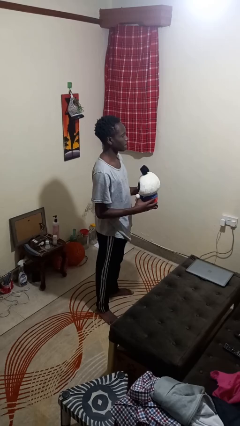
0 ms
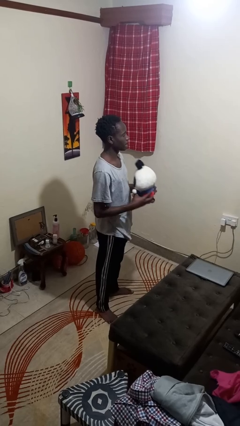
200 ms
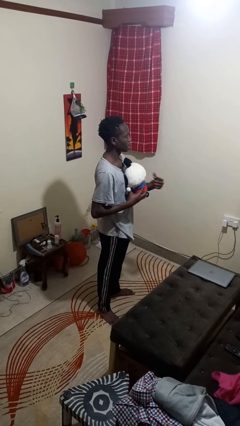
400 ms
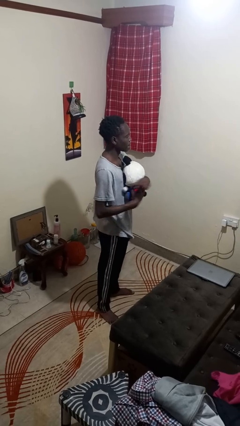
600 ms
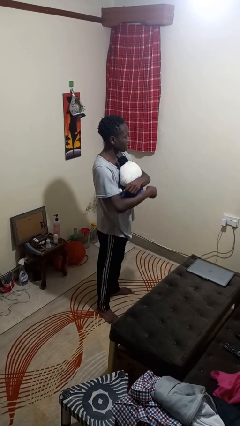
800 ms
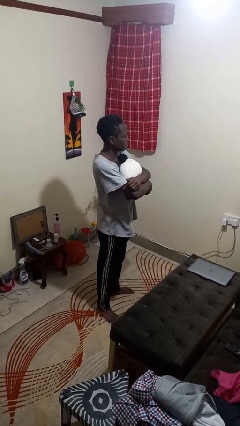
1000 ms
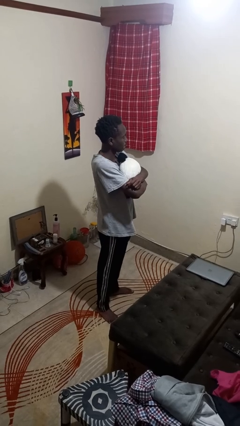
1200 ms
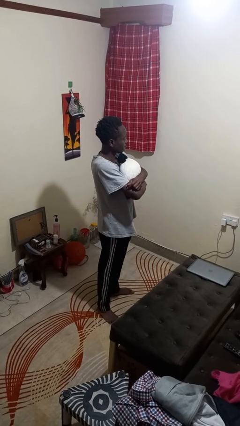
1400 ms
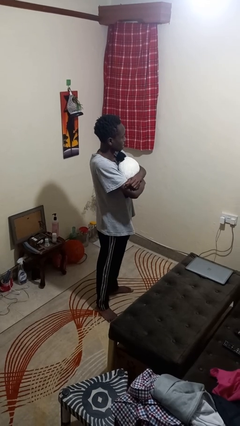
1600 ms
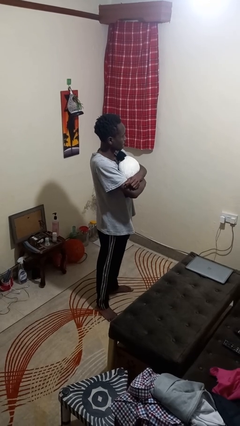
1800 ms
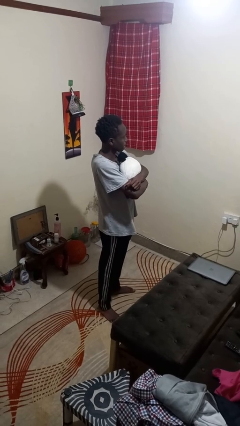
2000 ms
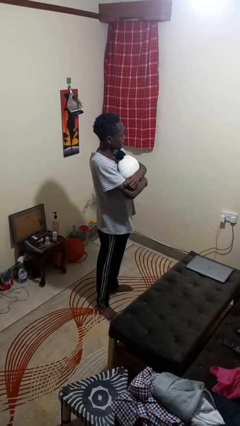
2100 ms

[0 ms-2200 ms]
person hugs stuffed animal

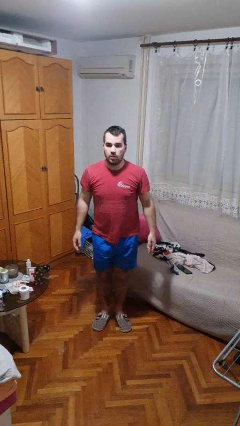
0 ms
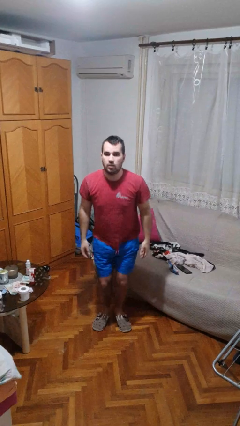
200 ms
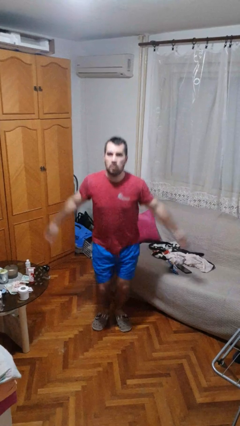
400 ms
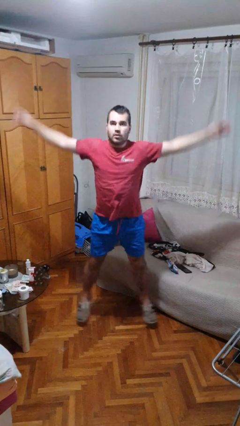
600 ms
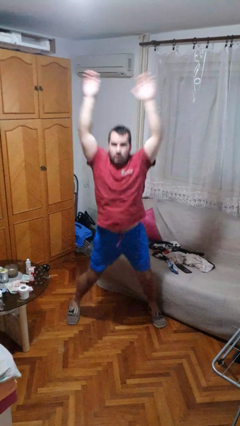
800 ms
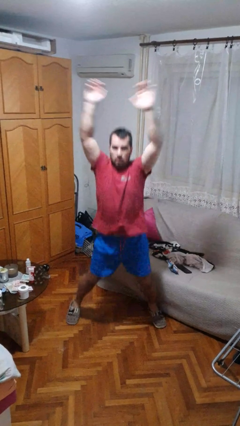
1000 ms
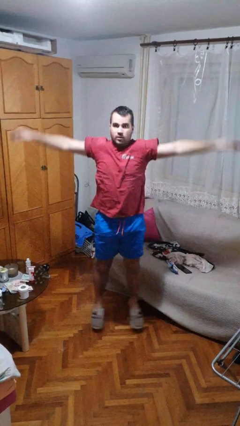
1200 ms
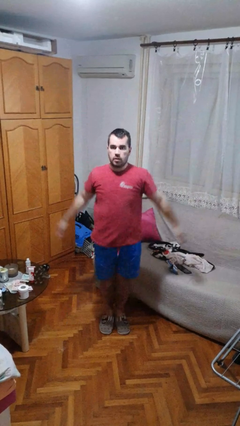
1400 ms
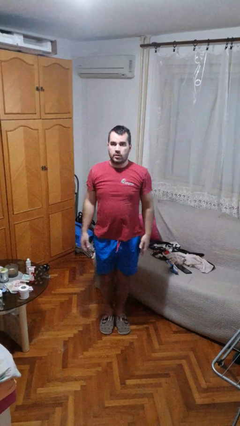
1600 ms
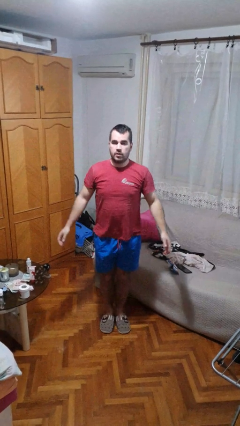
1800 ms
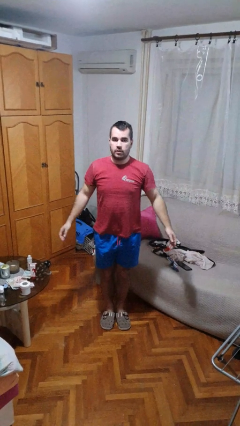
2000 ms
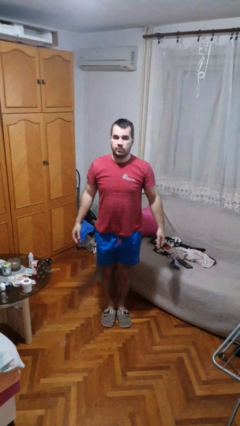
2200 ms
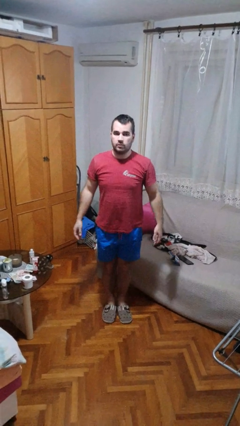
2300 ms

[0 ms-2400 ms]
person exercises with jumping jacks

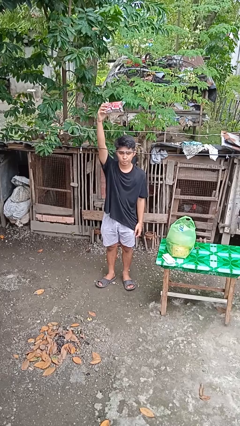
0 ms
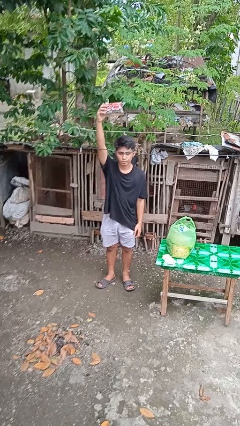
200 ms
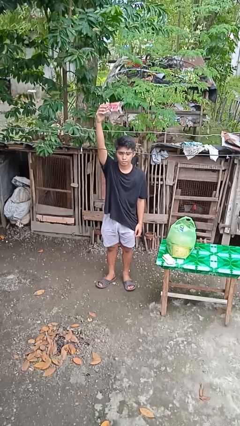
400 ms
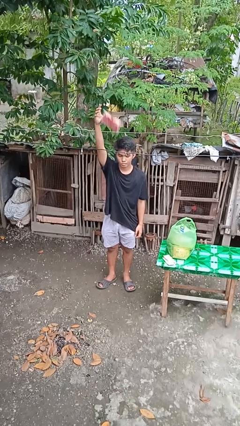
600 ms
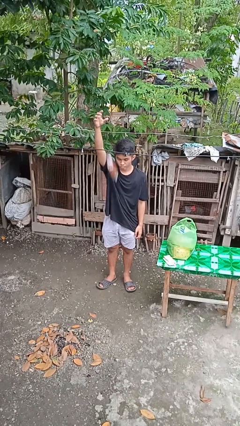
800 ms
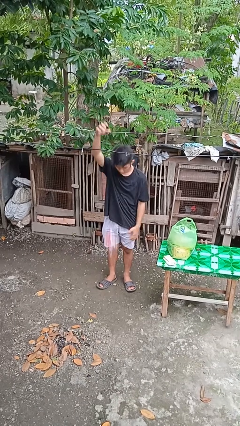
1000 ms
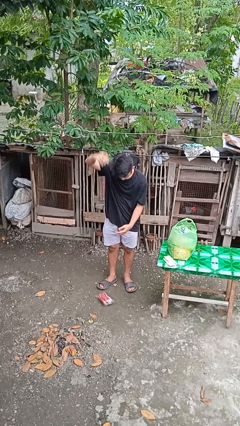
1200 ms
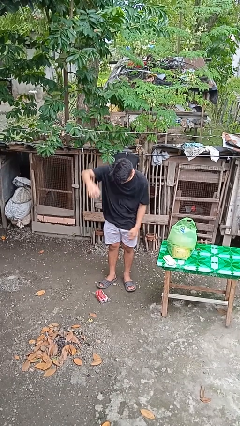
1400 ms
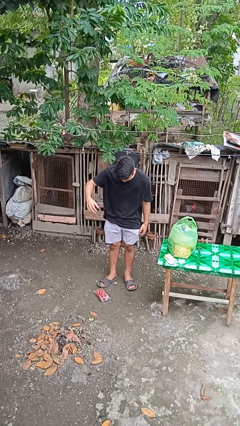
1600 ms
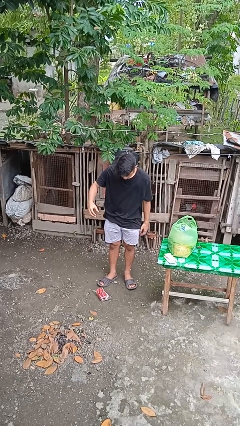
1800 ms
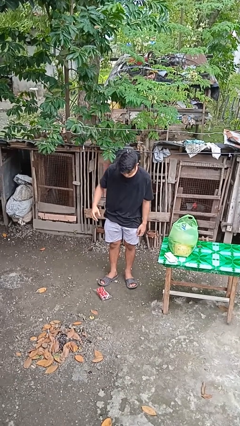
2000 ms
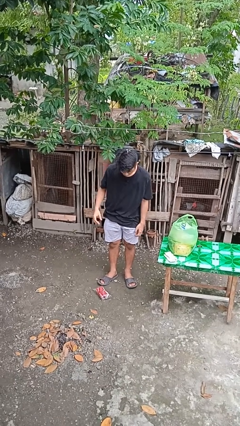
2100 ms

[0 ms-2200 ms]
person drops object

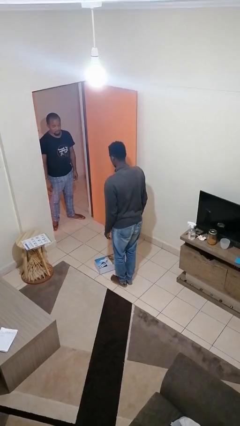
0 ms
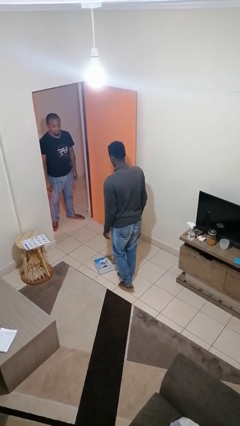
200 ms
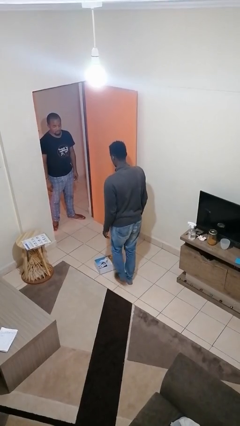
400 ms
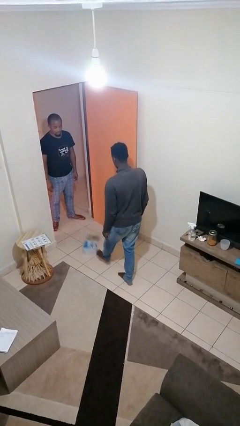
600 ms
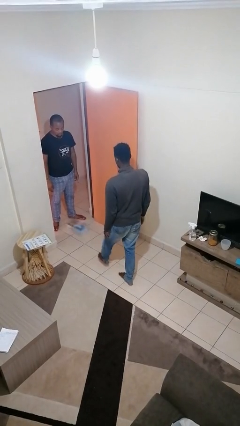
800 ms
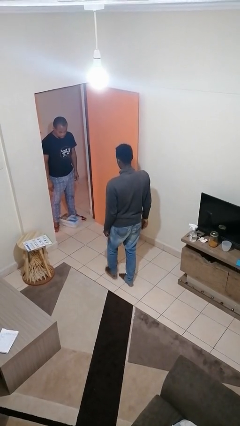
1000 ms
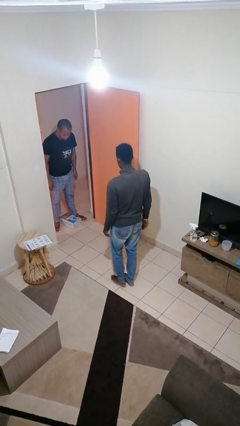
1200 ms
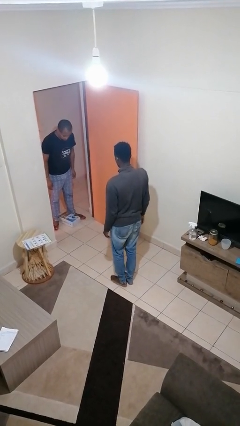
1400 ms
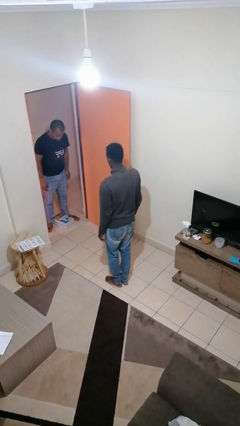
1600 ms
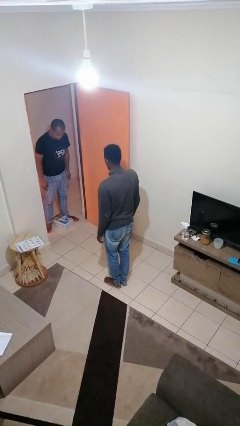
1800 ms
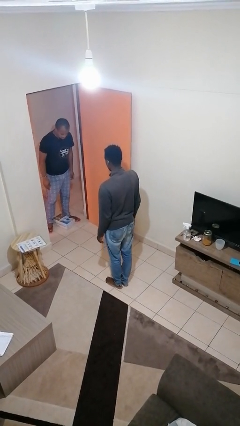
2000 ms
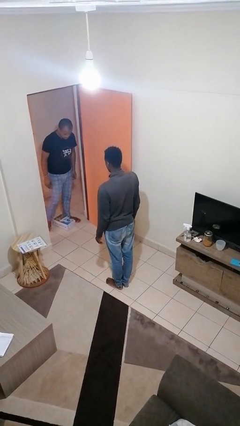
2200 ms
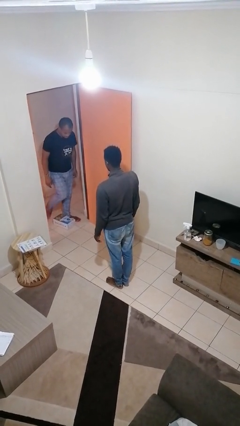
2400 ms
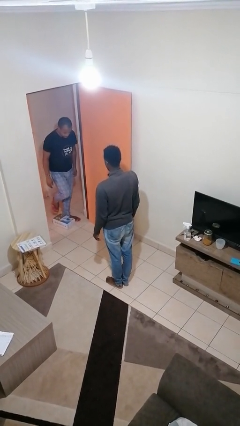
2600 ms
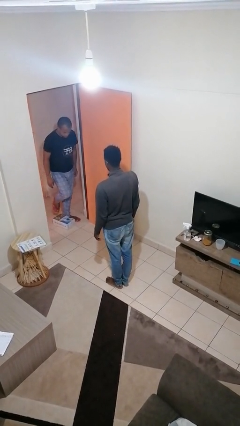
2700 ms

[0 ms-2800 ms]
person kicks object to person

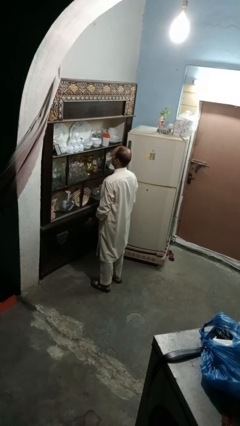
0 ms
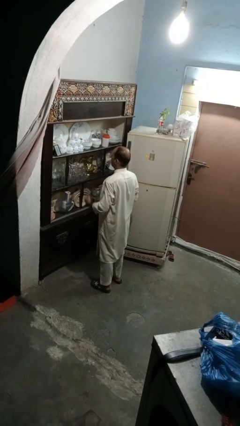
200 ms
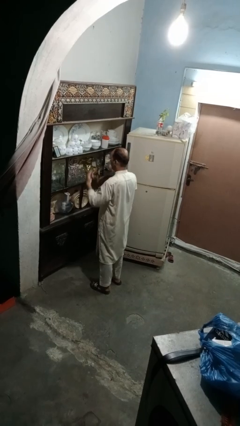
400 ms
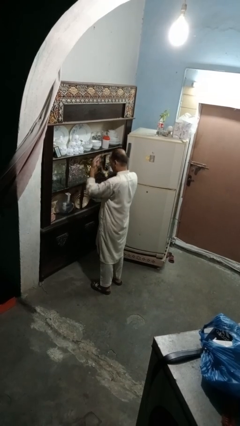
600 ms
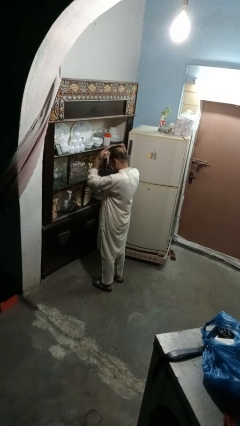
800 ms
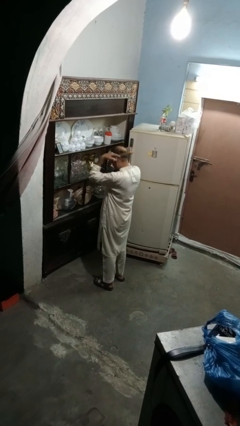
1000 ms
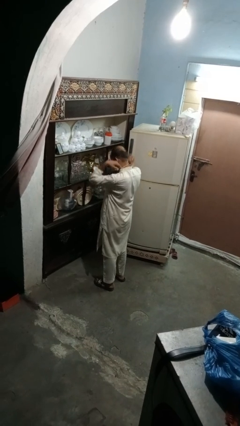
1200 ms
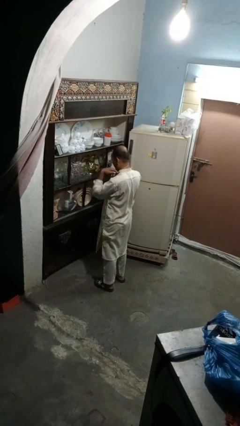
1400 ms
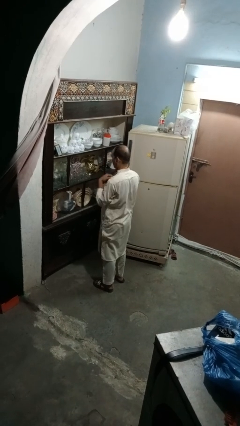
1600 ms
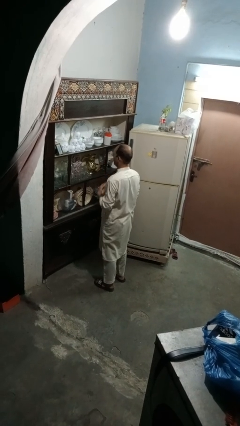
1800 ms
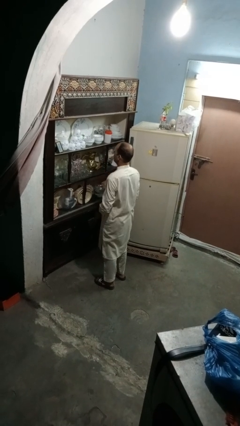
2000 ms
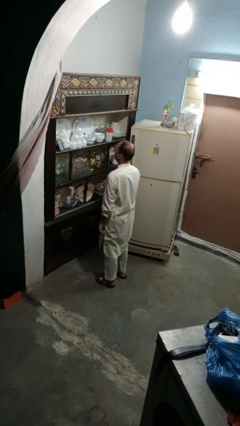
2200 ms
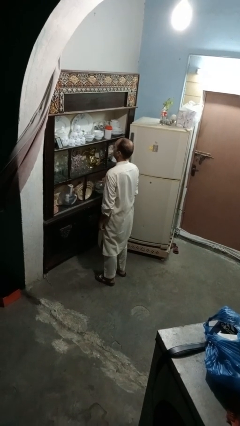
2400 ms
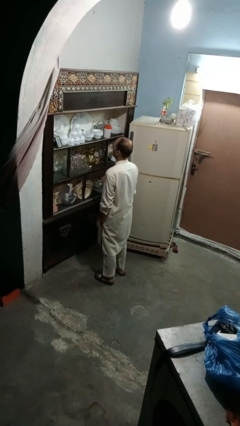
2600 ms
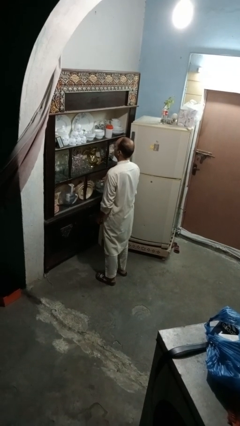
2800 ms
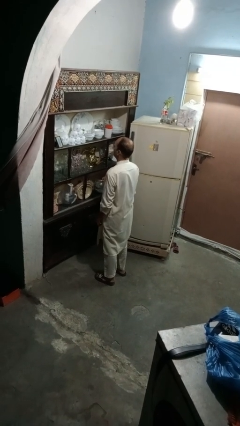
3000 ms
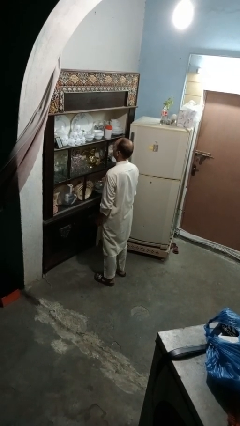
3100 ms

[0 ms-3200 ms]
person puts on necklace

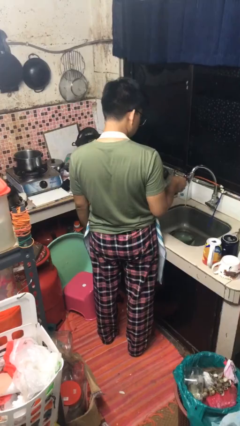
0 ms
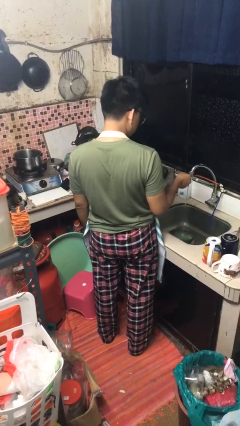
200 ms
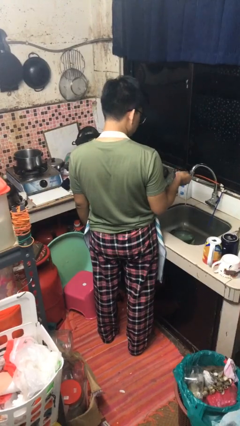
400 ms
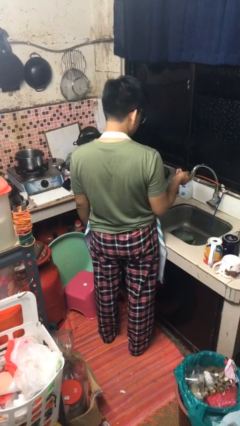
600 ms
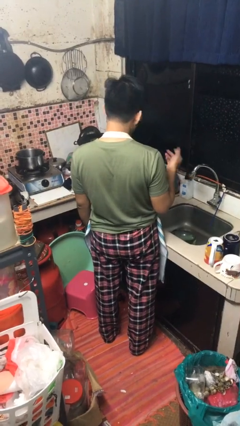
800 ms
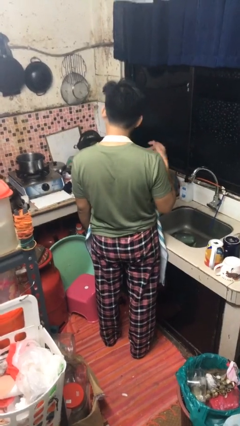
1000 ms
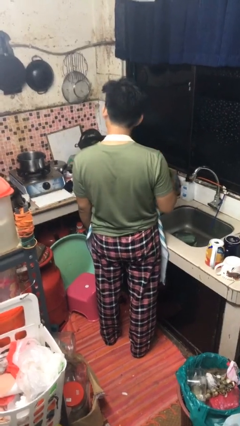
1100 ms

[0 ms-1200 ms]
person turns off faucet

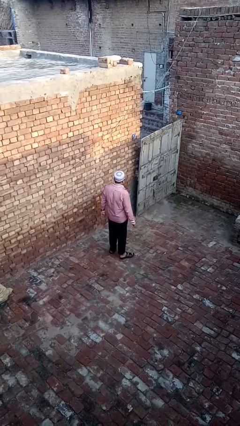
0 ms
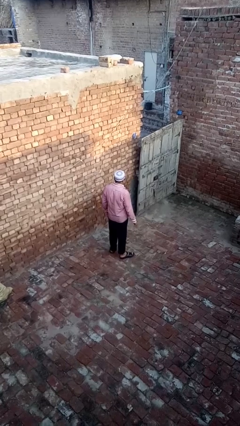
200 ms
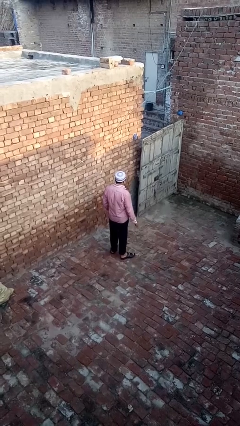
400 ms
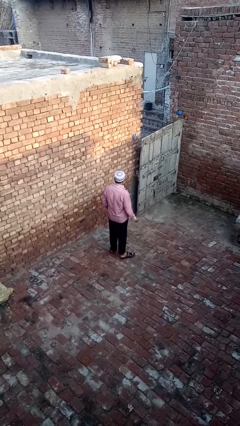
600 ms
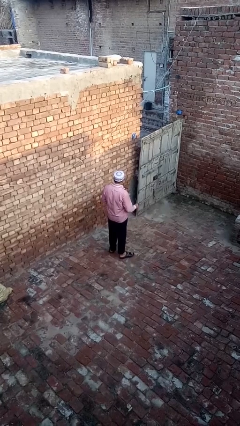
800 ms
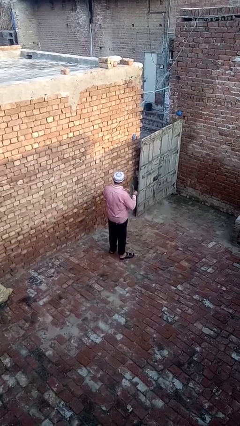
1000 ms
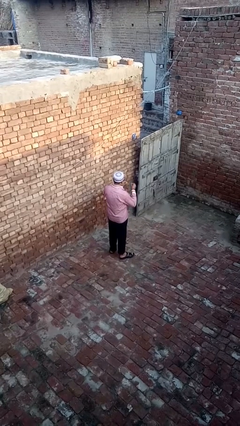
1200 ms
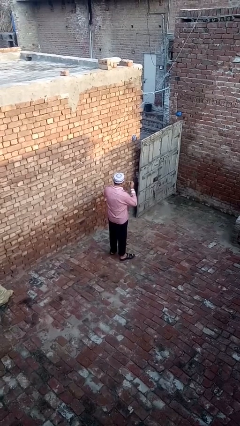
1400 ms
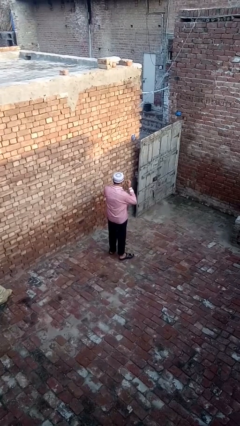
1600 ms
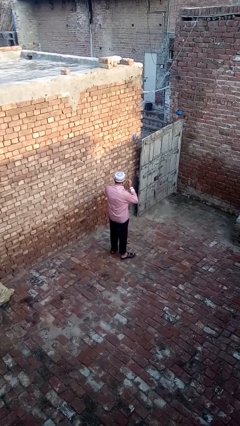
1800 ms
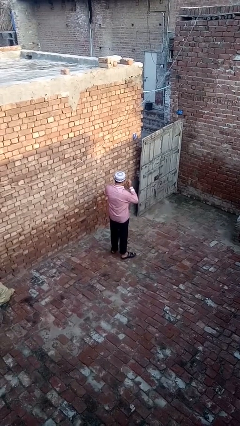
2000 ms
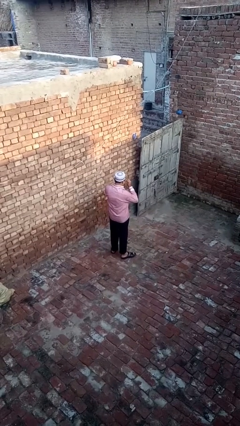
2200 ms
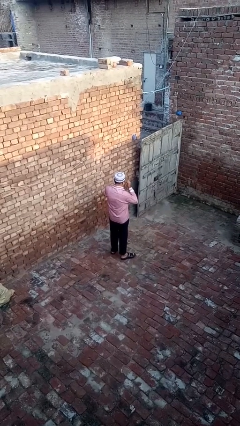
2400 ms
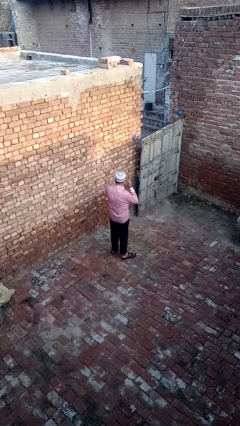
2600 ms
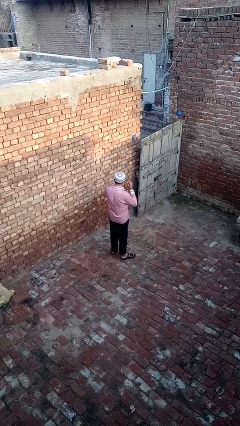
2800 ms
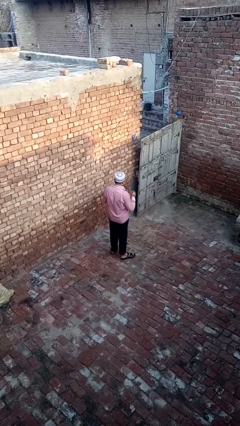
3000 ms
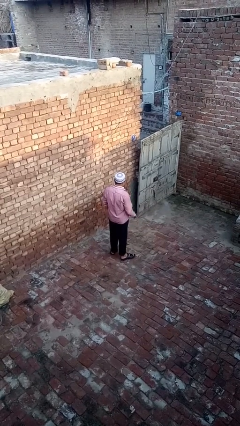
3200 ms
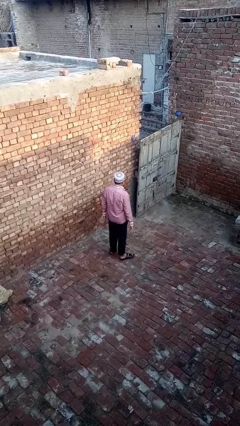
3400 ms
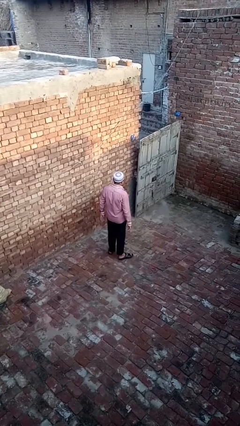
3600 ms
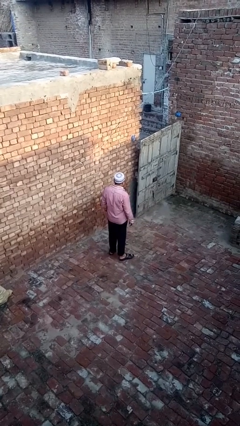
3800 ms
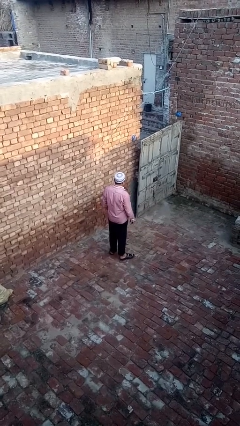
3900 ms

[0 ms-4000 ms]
person puts on glasses
